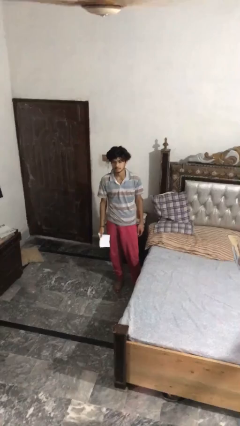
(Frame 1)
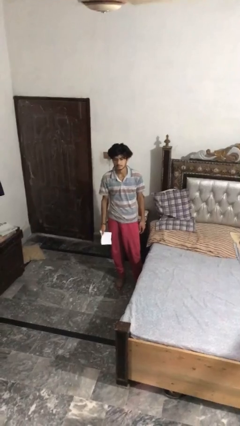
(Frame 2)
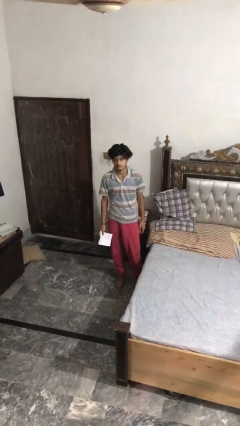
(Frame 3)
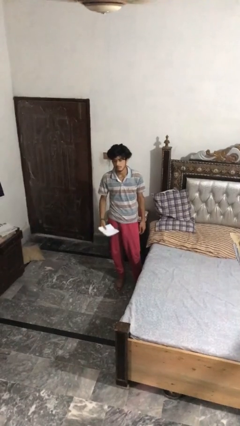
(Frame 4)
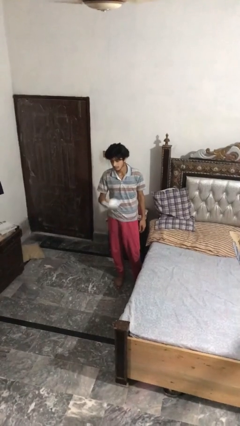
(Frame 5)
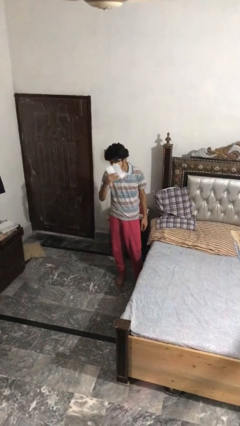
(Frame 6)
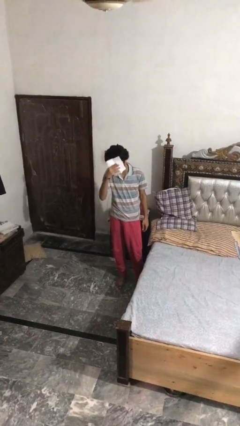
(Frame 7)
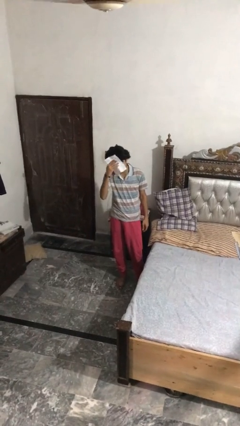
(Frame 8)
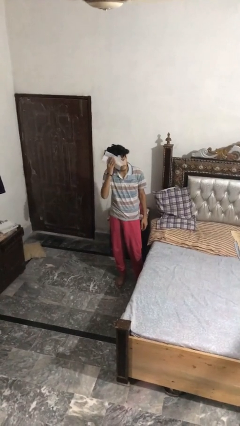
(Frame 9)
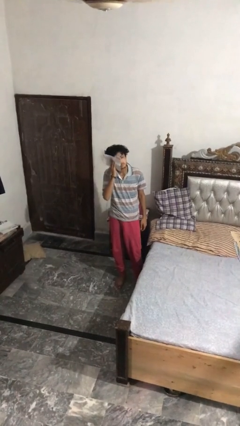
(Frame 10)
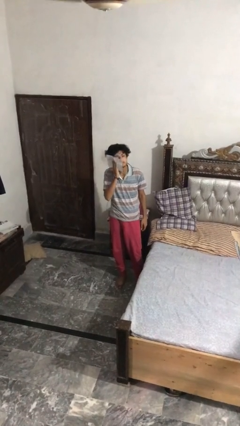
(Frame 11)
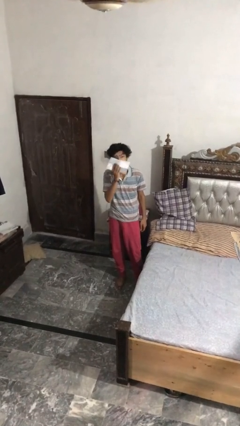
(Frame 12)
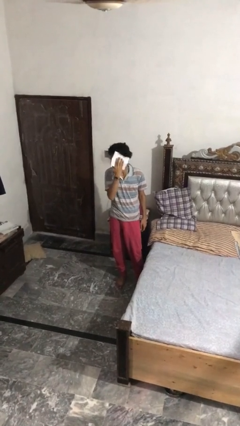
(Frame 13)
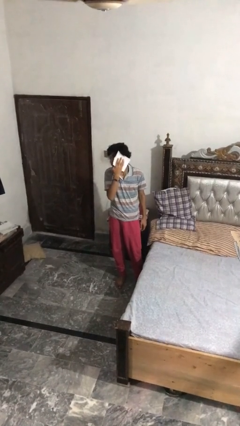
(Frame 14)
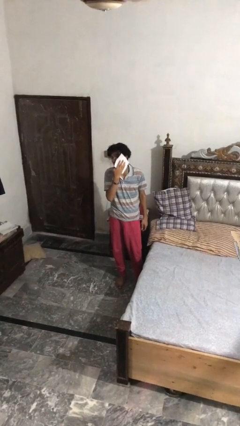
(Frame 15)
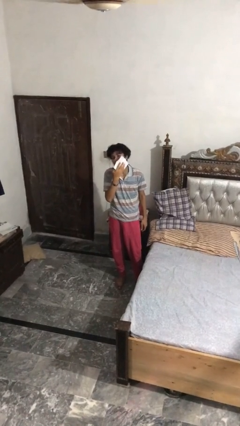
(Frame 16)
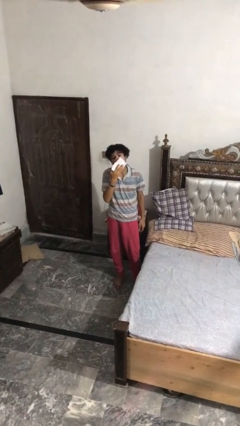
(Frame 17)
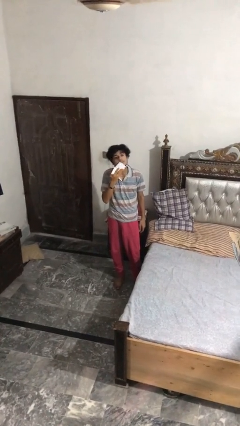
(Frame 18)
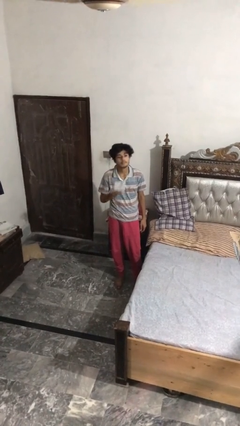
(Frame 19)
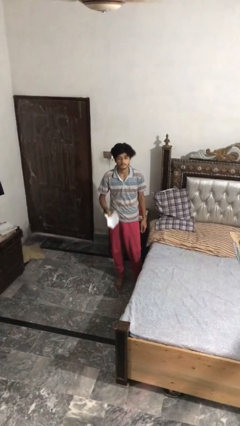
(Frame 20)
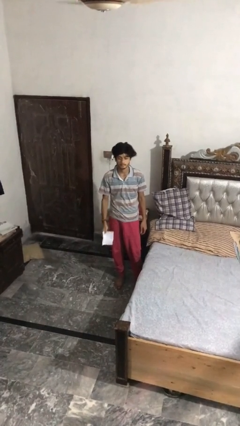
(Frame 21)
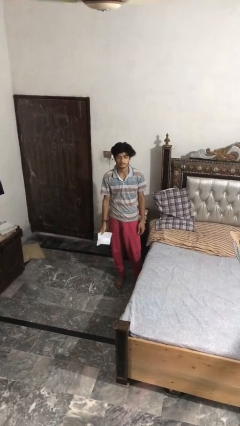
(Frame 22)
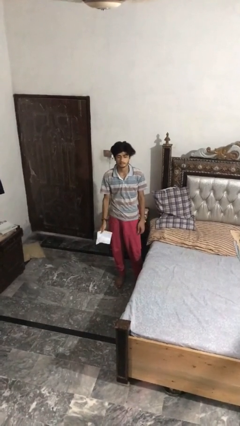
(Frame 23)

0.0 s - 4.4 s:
person wipes mouth with napkin

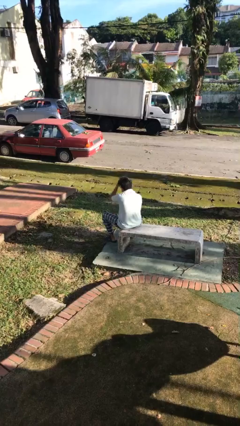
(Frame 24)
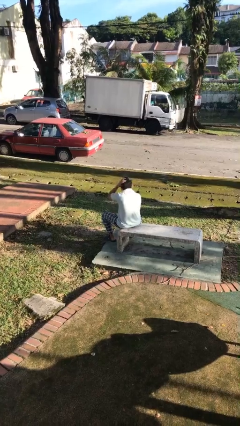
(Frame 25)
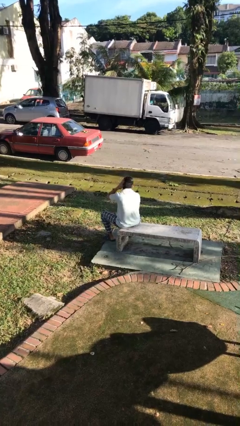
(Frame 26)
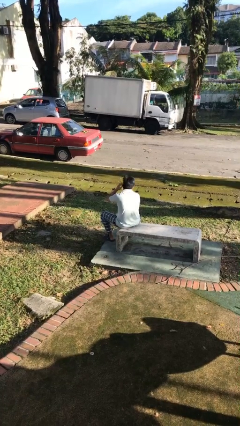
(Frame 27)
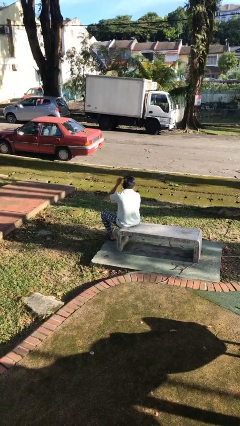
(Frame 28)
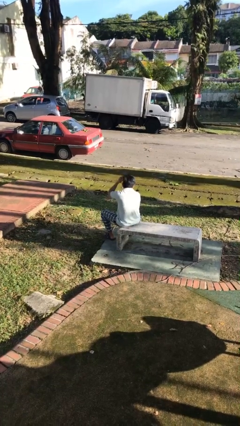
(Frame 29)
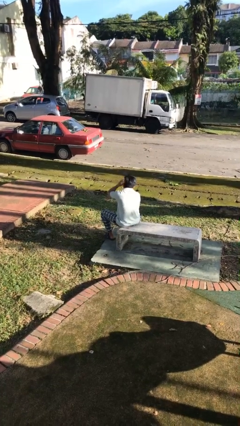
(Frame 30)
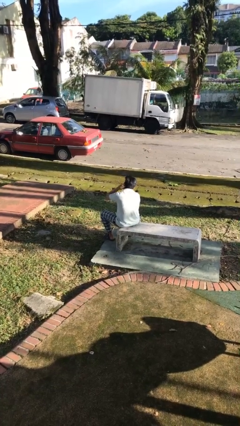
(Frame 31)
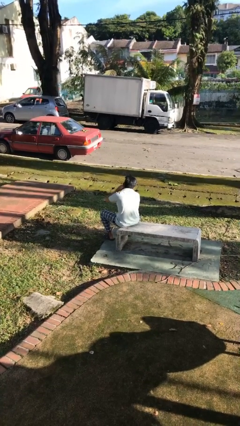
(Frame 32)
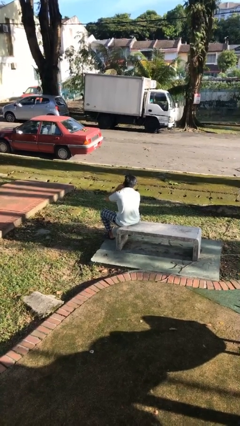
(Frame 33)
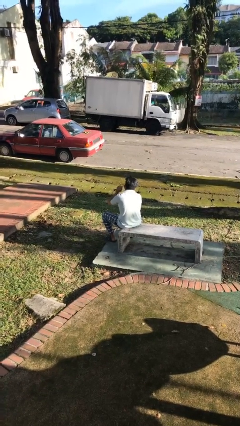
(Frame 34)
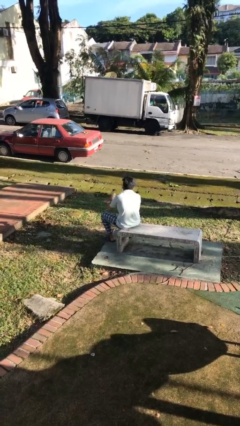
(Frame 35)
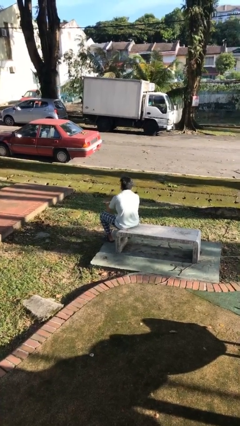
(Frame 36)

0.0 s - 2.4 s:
person strokes hair

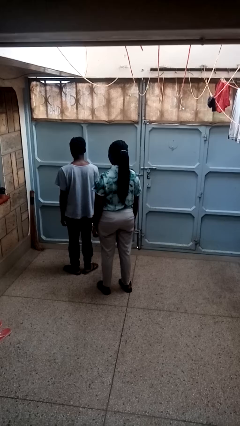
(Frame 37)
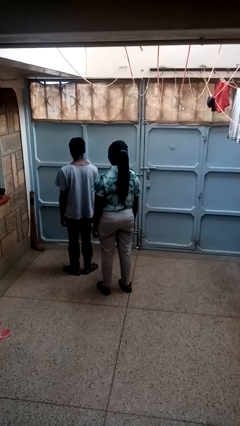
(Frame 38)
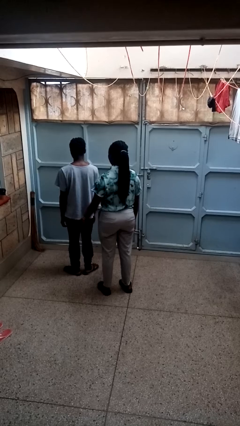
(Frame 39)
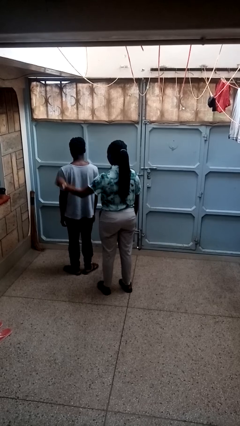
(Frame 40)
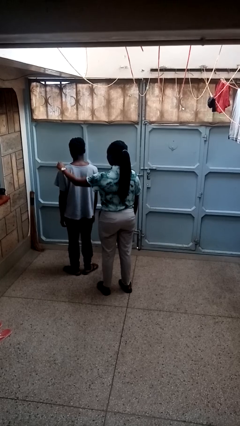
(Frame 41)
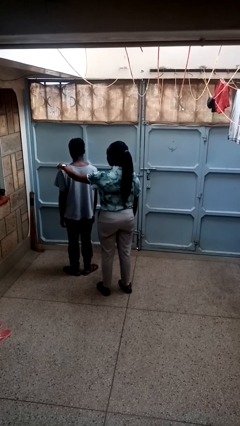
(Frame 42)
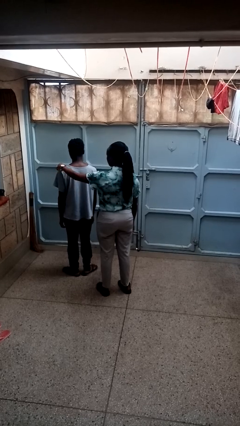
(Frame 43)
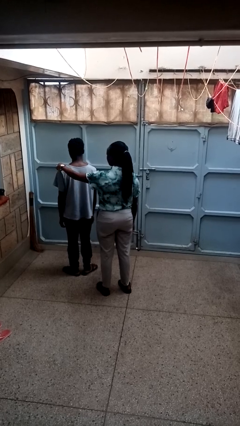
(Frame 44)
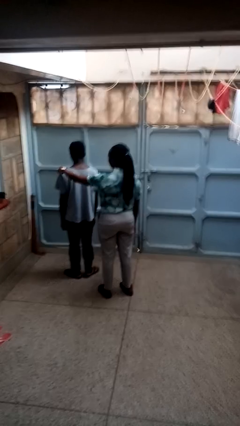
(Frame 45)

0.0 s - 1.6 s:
person grabs person by shoulder

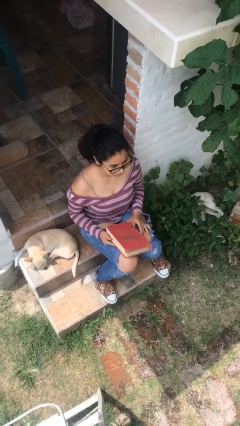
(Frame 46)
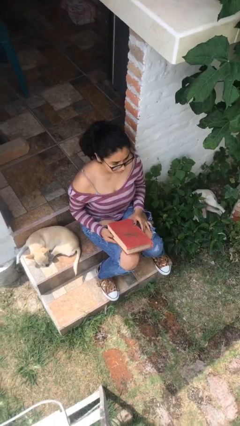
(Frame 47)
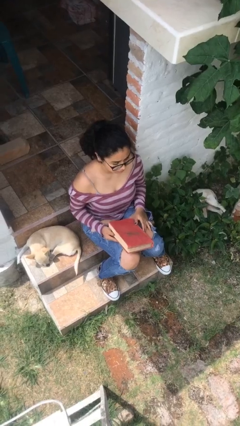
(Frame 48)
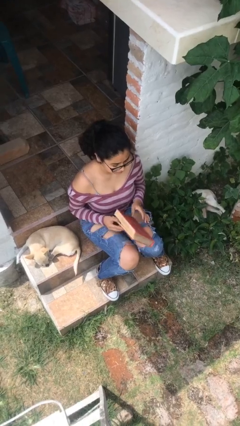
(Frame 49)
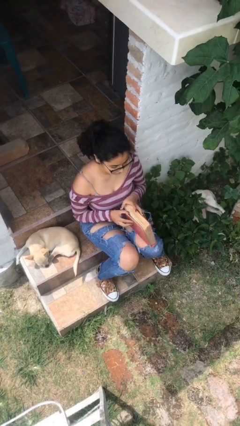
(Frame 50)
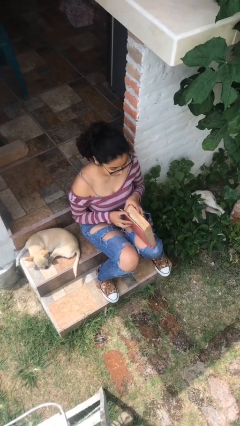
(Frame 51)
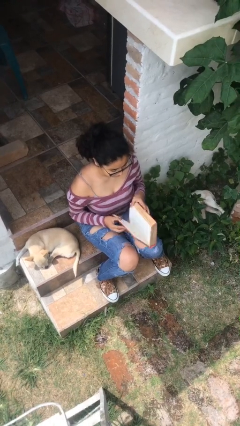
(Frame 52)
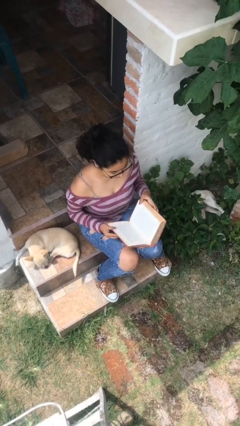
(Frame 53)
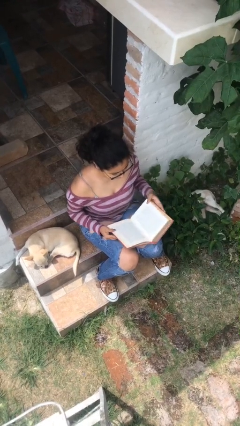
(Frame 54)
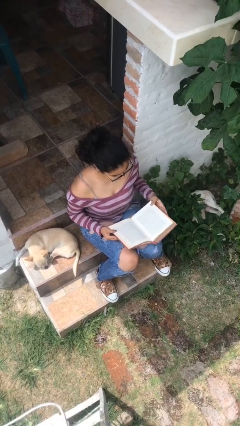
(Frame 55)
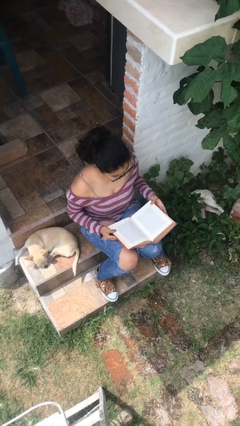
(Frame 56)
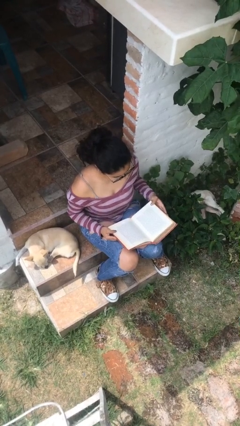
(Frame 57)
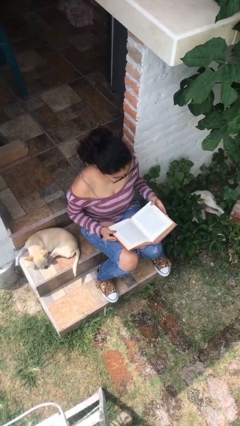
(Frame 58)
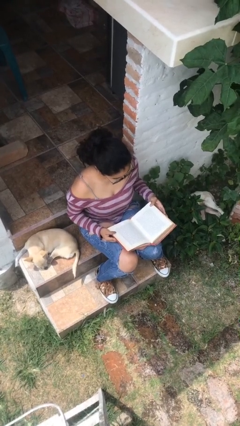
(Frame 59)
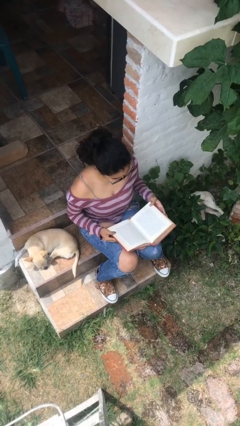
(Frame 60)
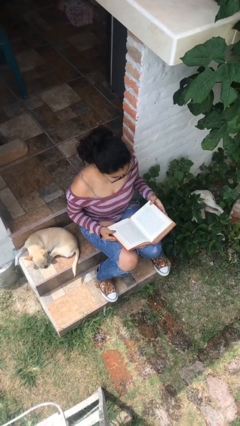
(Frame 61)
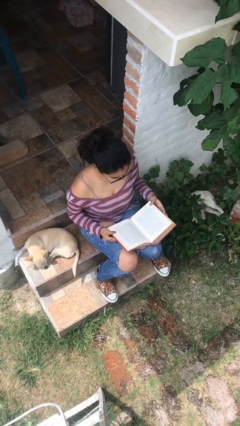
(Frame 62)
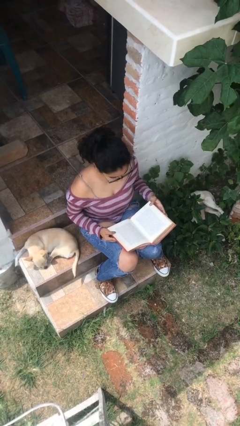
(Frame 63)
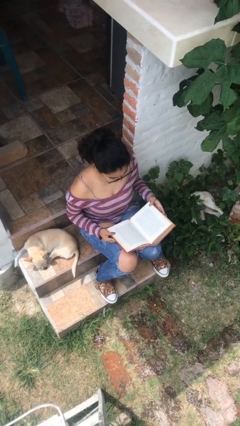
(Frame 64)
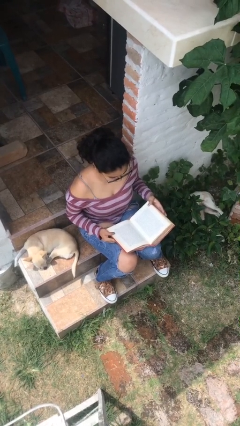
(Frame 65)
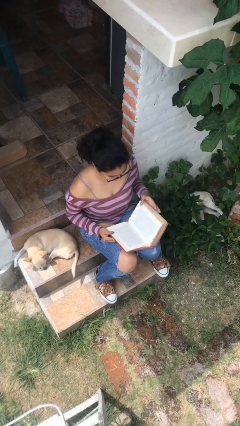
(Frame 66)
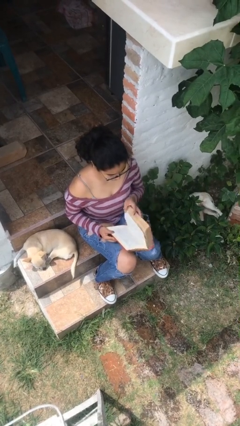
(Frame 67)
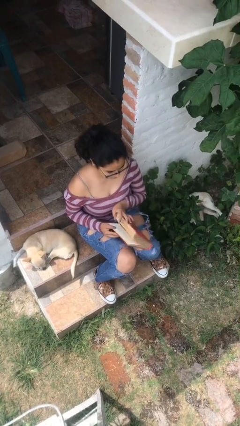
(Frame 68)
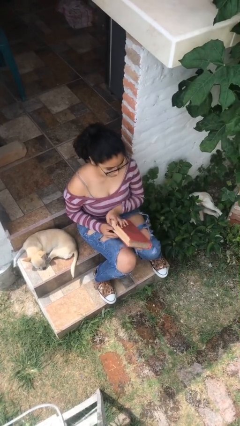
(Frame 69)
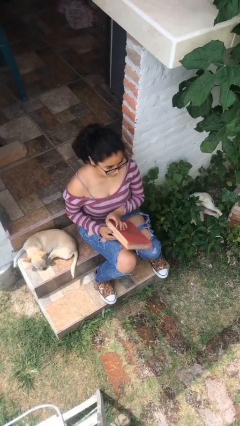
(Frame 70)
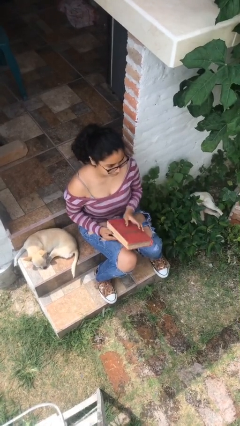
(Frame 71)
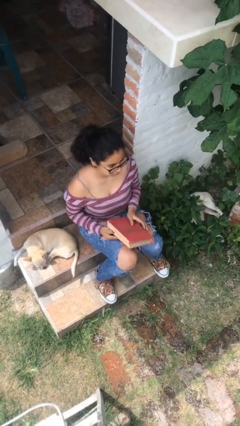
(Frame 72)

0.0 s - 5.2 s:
person reads book

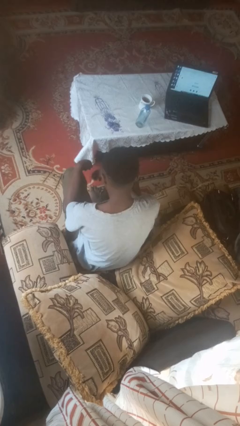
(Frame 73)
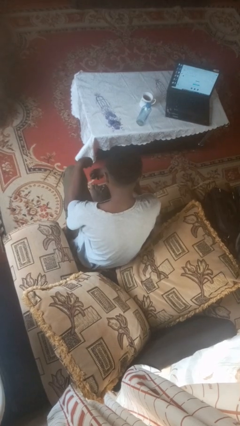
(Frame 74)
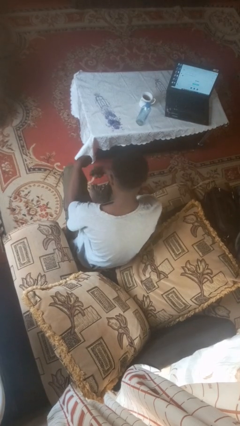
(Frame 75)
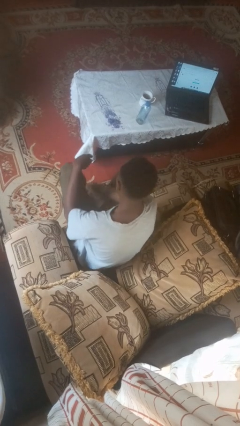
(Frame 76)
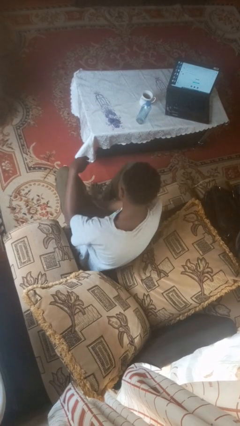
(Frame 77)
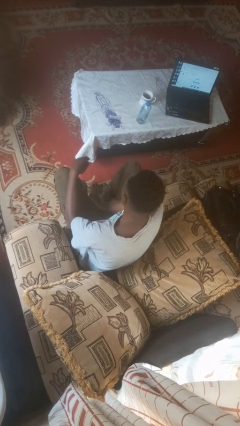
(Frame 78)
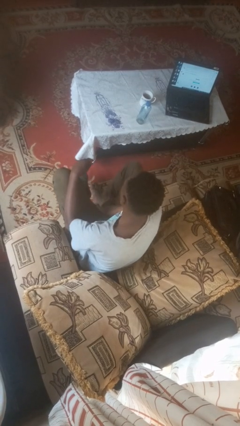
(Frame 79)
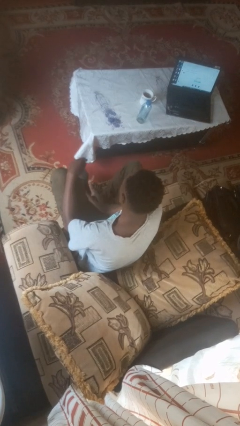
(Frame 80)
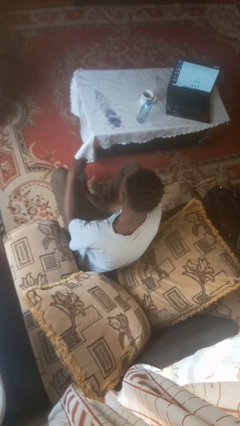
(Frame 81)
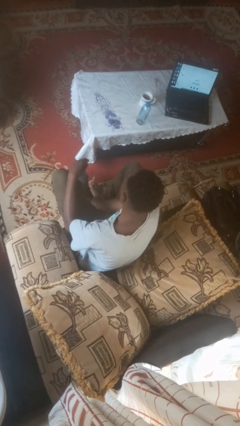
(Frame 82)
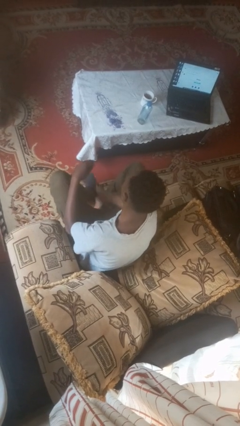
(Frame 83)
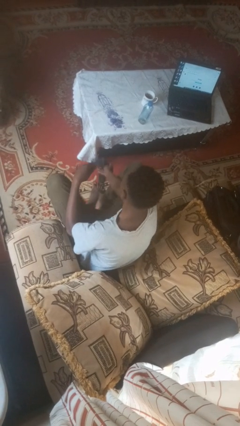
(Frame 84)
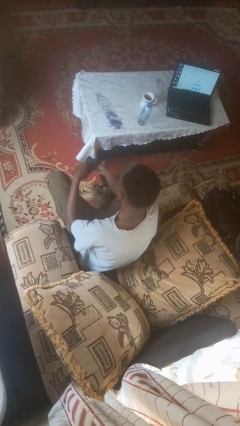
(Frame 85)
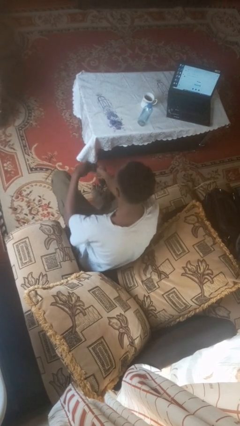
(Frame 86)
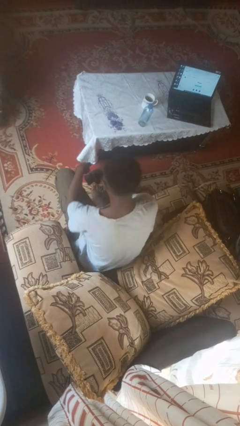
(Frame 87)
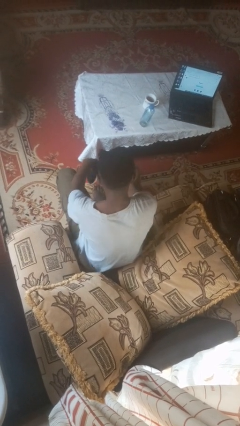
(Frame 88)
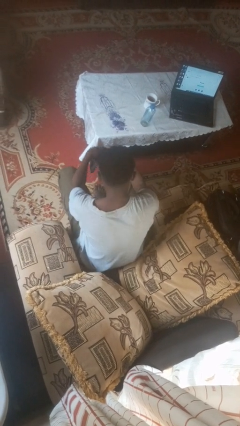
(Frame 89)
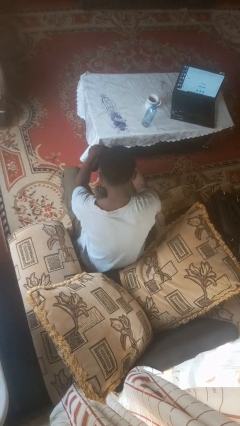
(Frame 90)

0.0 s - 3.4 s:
person takes off socks

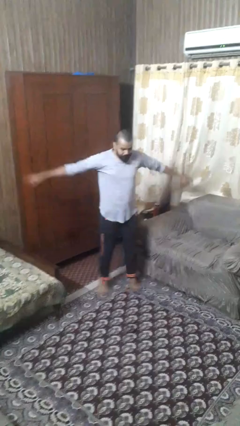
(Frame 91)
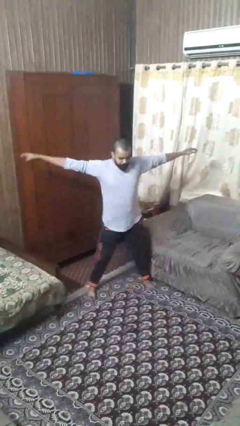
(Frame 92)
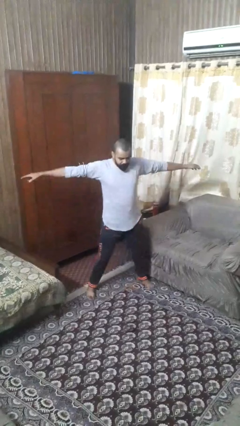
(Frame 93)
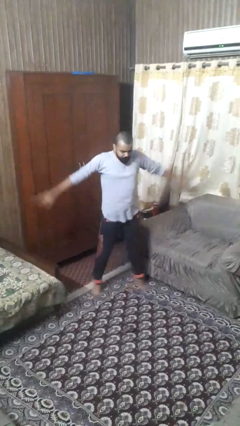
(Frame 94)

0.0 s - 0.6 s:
person exercises with jumping jacks
